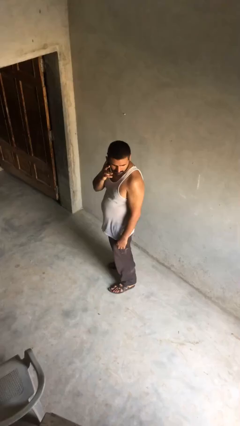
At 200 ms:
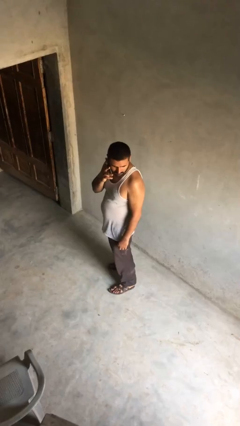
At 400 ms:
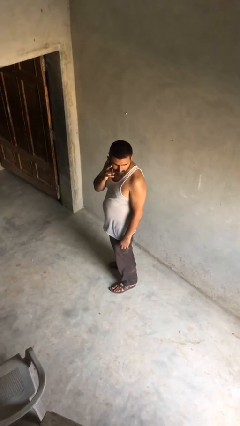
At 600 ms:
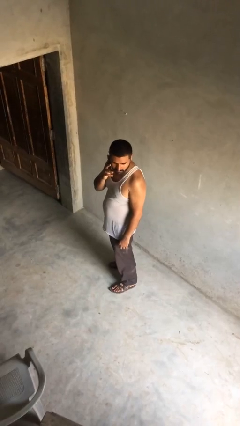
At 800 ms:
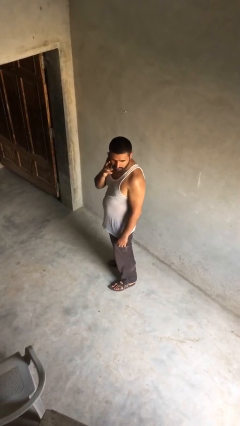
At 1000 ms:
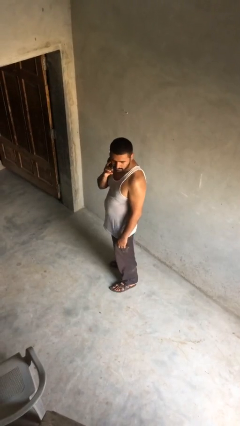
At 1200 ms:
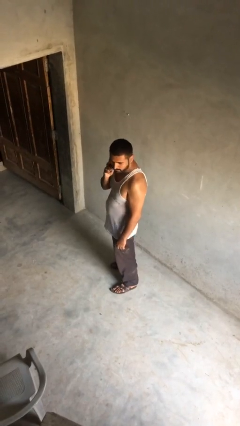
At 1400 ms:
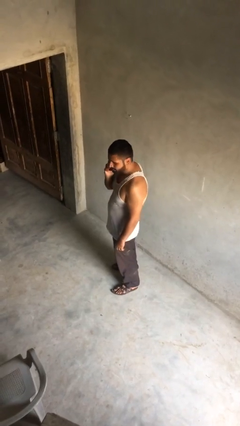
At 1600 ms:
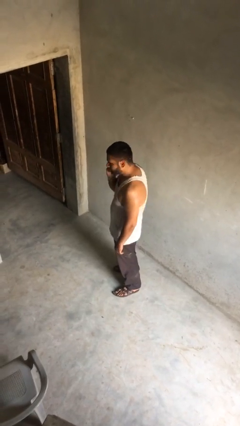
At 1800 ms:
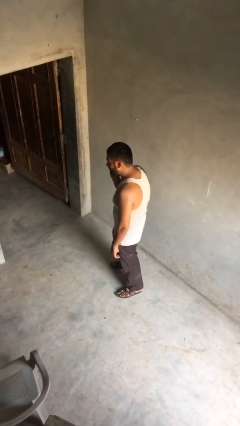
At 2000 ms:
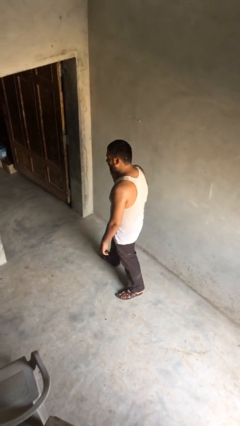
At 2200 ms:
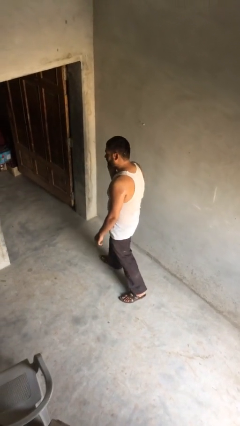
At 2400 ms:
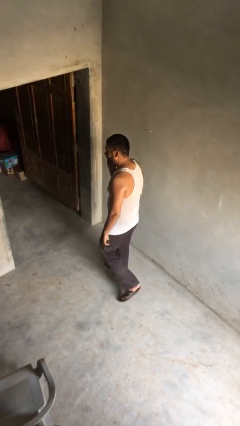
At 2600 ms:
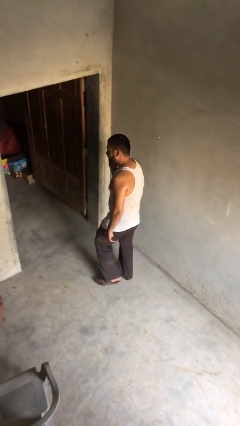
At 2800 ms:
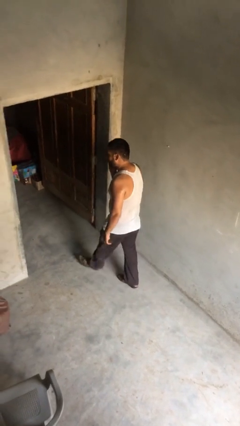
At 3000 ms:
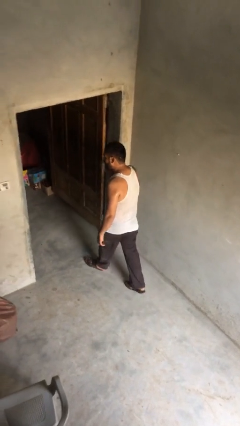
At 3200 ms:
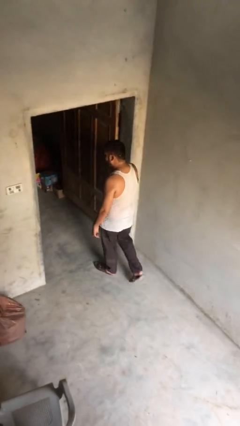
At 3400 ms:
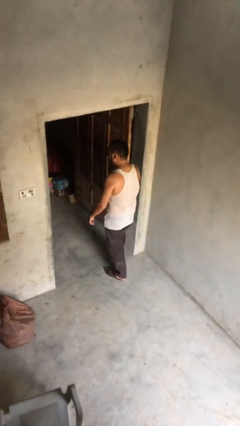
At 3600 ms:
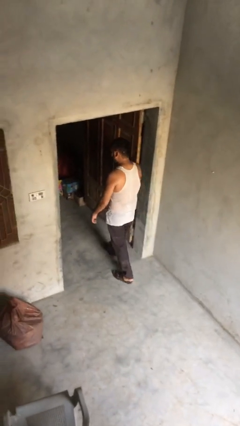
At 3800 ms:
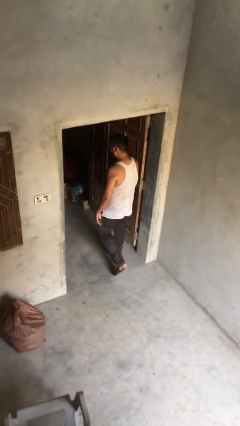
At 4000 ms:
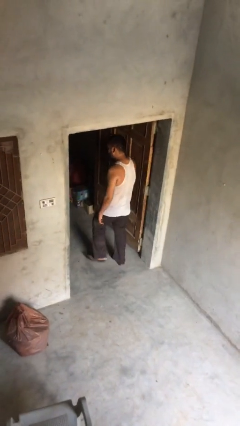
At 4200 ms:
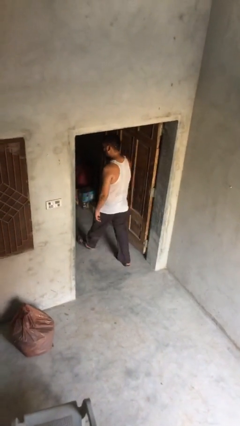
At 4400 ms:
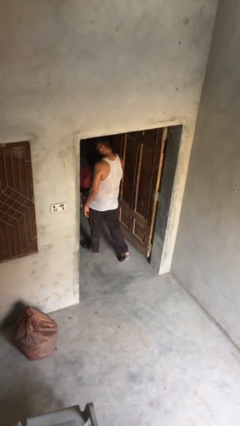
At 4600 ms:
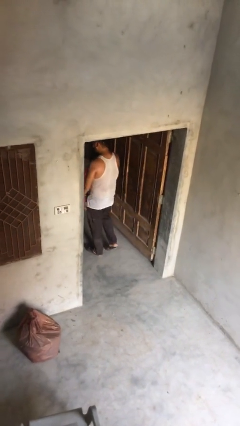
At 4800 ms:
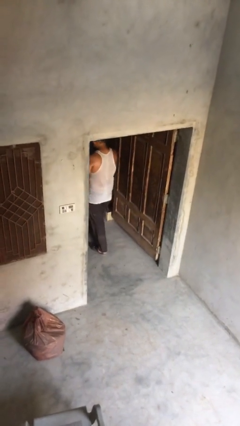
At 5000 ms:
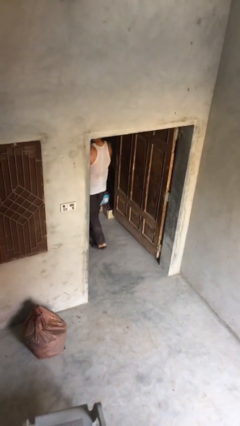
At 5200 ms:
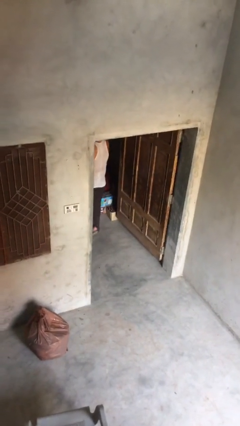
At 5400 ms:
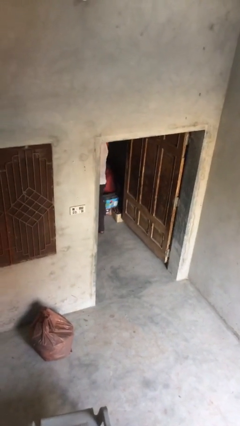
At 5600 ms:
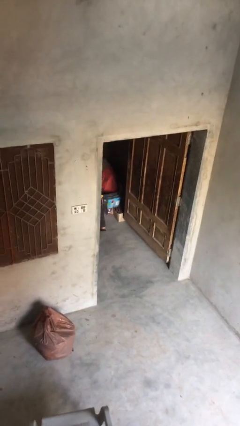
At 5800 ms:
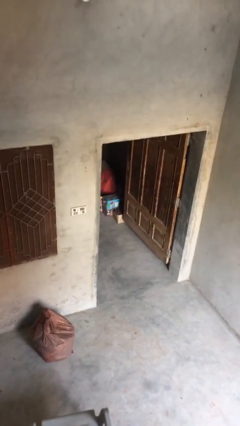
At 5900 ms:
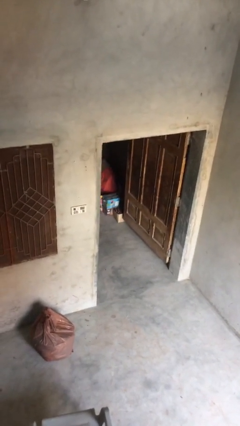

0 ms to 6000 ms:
person exits scene through structure

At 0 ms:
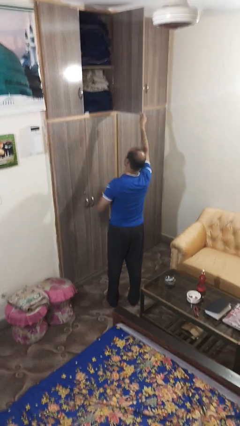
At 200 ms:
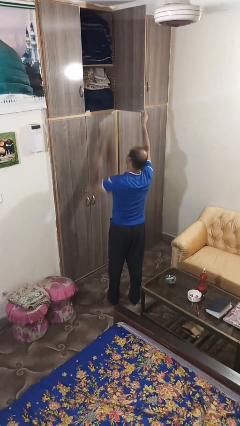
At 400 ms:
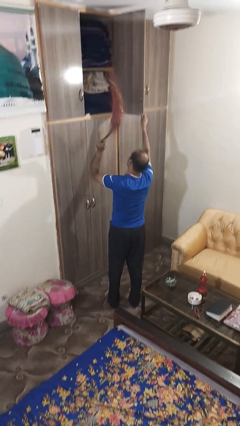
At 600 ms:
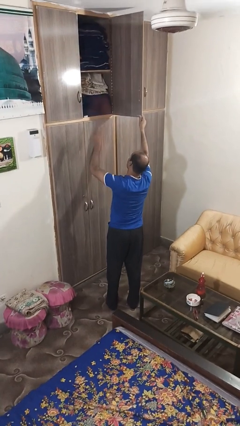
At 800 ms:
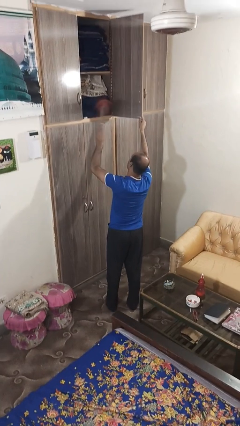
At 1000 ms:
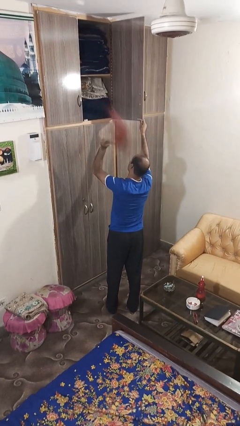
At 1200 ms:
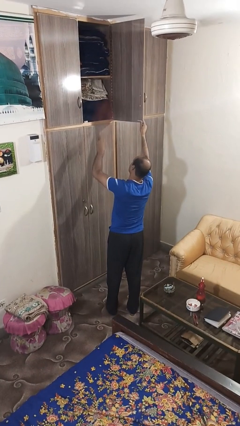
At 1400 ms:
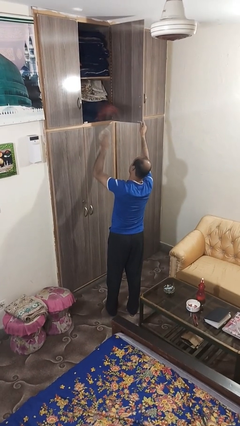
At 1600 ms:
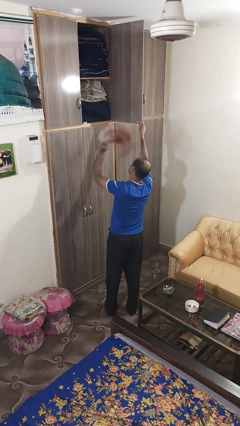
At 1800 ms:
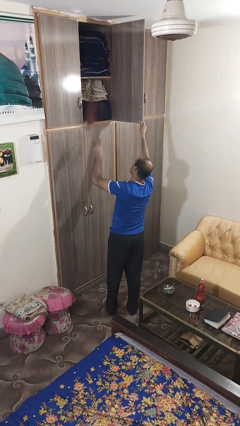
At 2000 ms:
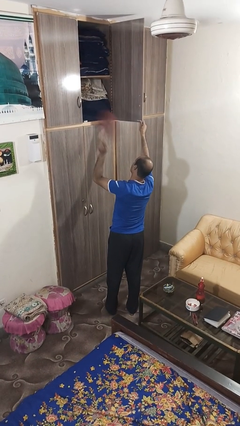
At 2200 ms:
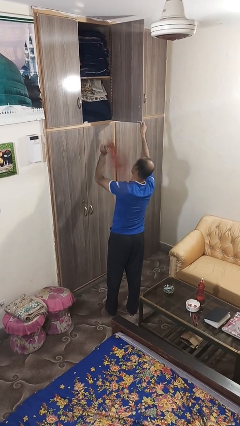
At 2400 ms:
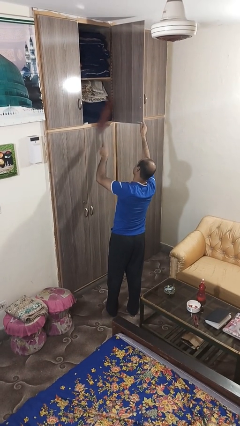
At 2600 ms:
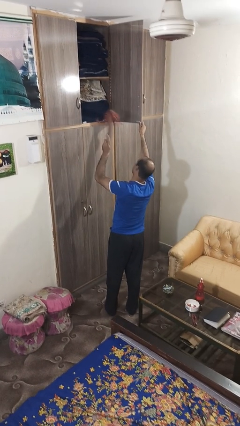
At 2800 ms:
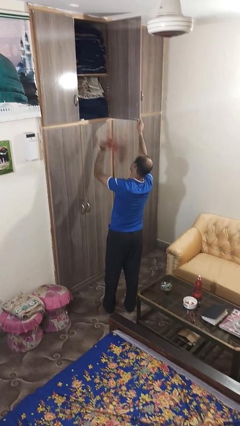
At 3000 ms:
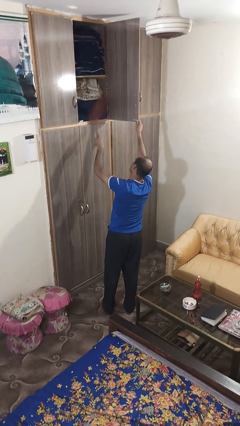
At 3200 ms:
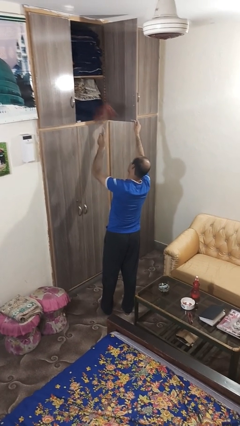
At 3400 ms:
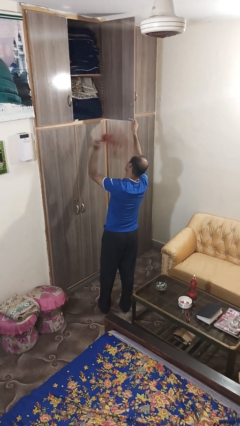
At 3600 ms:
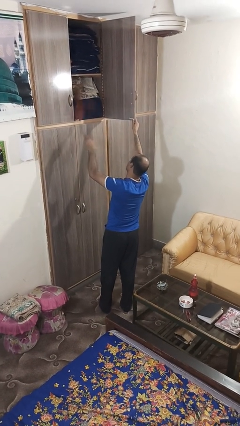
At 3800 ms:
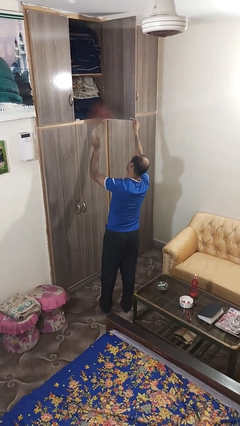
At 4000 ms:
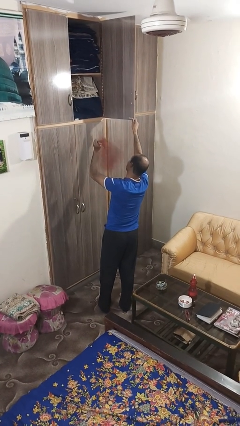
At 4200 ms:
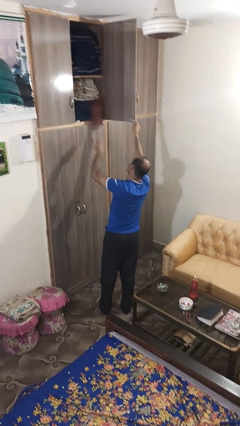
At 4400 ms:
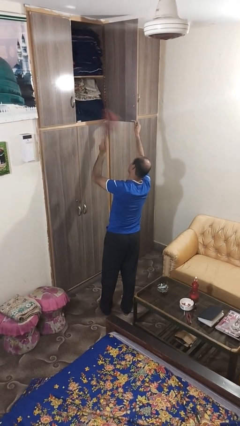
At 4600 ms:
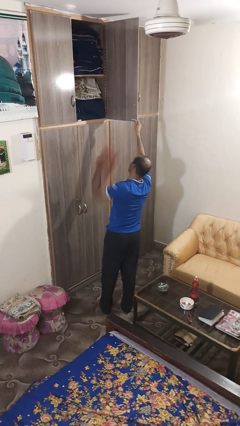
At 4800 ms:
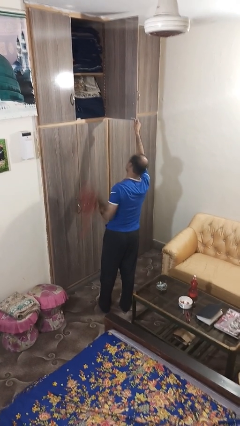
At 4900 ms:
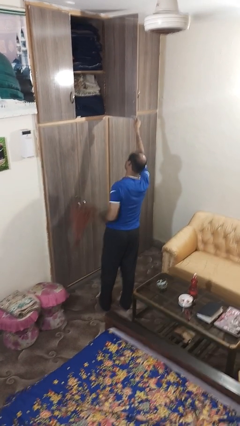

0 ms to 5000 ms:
person dusts furniture

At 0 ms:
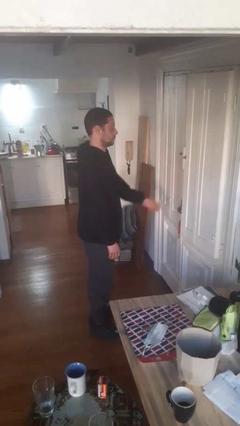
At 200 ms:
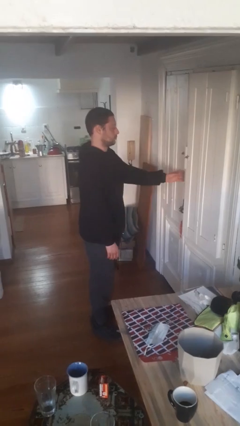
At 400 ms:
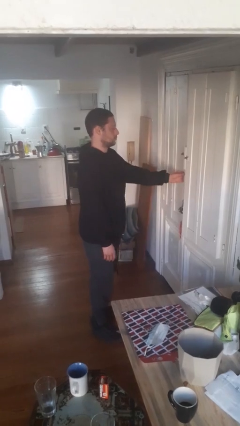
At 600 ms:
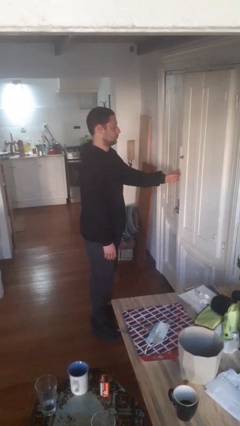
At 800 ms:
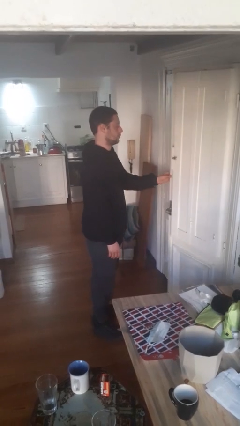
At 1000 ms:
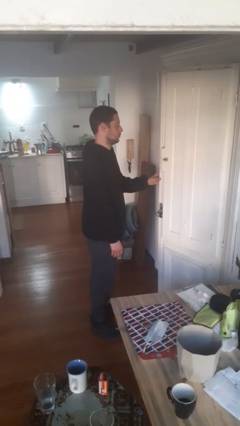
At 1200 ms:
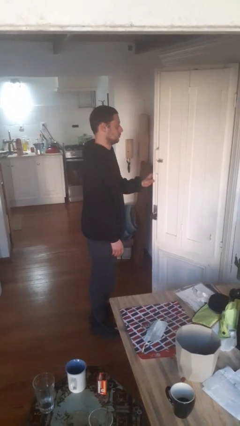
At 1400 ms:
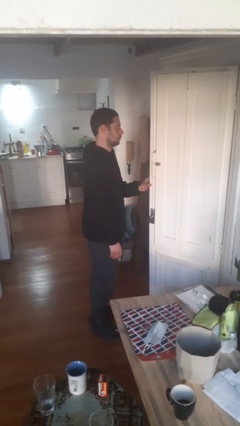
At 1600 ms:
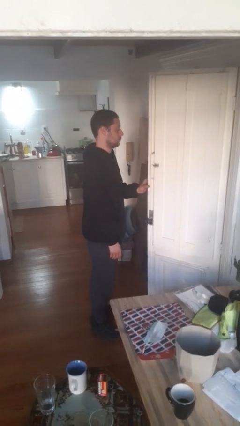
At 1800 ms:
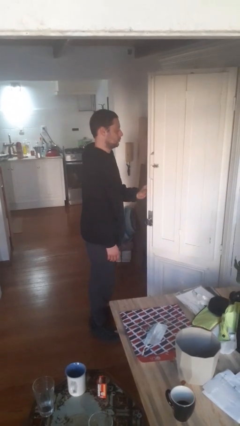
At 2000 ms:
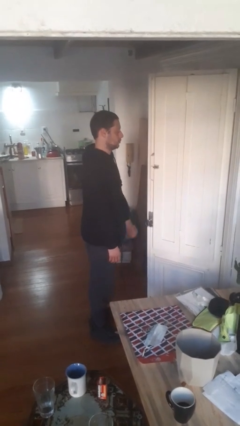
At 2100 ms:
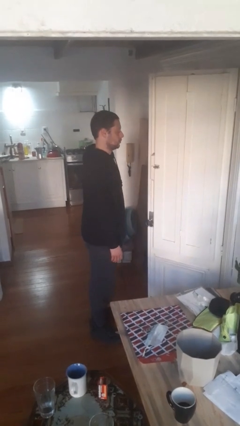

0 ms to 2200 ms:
person opens facility door

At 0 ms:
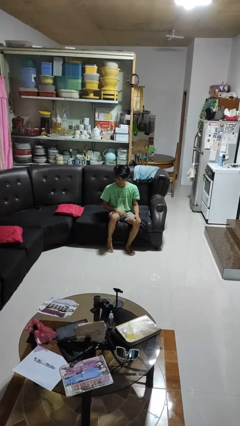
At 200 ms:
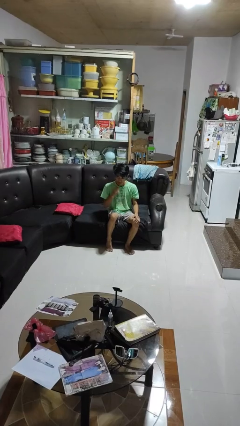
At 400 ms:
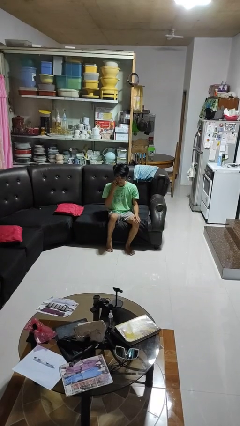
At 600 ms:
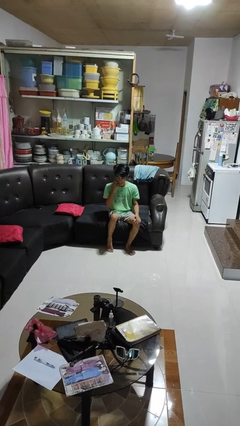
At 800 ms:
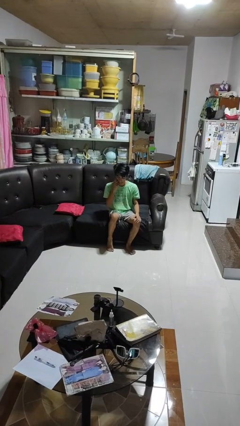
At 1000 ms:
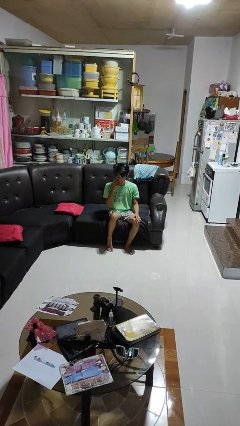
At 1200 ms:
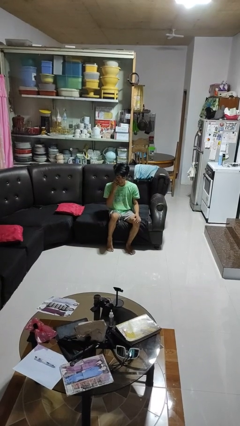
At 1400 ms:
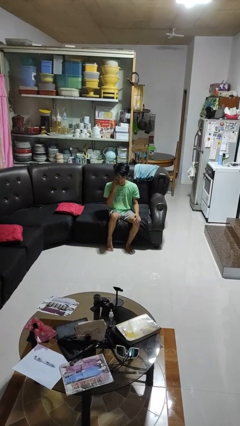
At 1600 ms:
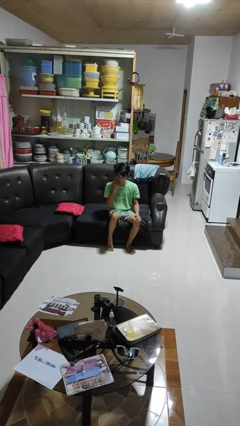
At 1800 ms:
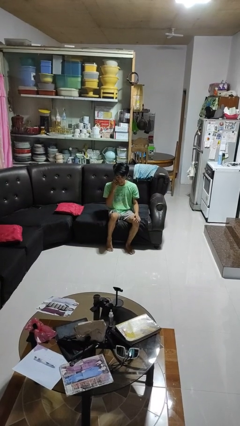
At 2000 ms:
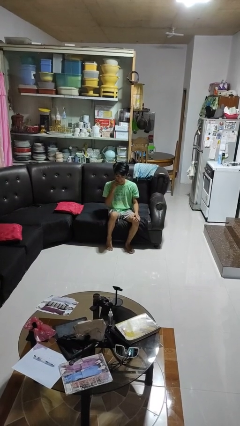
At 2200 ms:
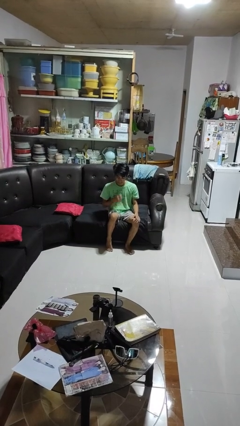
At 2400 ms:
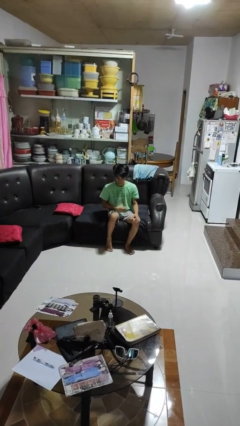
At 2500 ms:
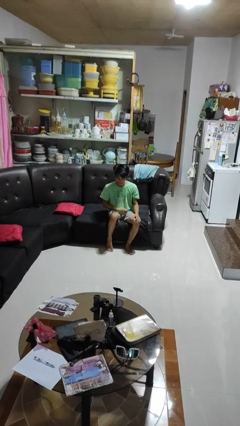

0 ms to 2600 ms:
person scratches face

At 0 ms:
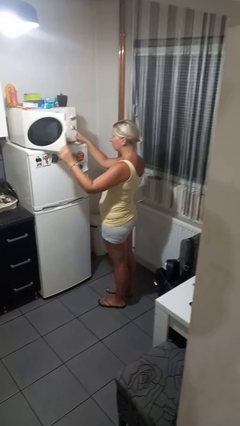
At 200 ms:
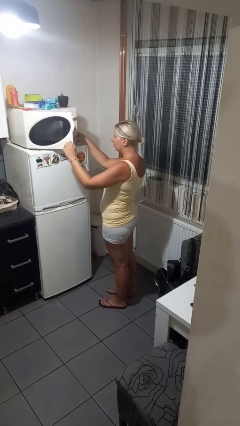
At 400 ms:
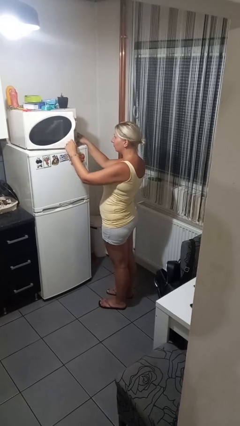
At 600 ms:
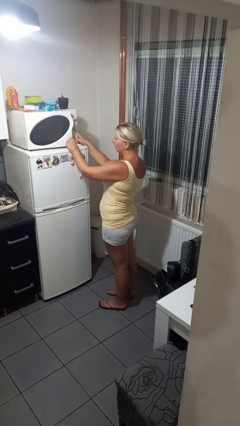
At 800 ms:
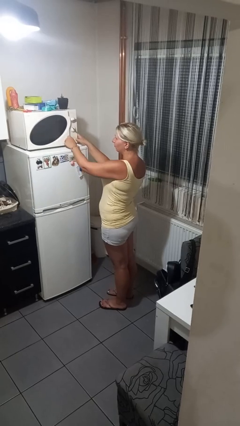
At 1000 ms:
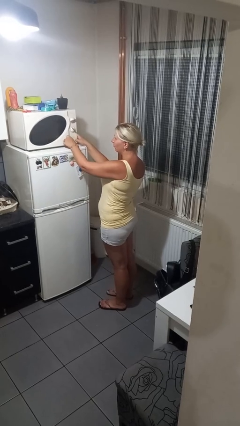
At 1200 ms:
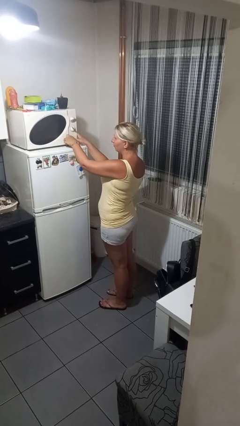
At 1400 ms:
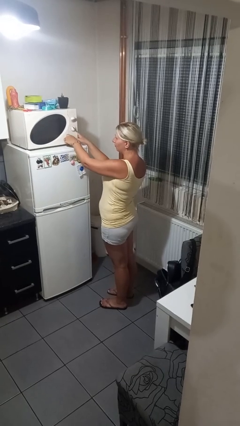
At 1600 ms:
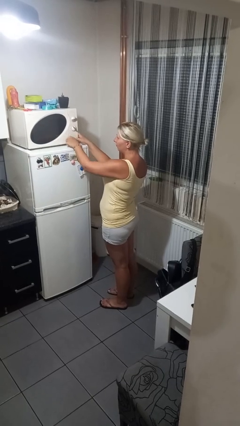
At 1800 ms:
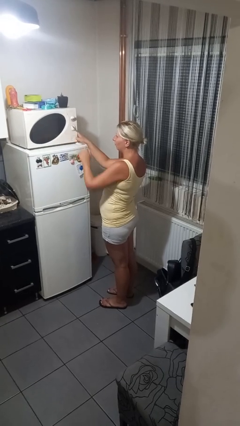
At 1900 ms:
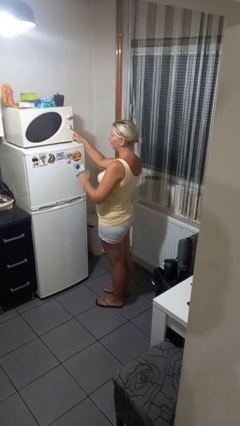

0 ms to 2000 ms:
person closes microwave
